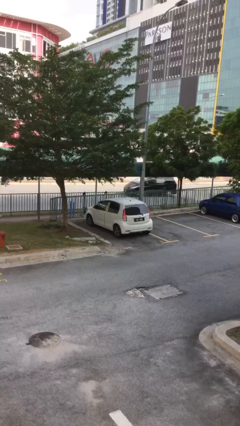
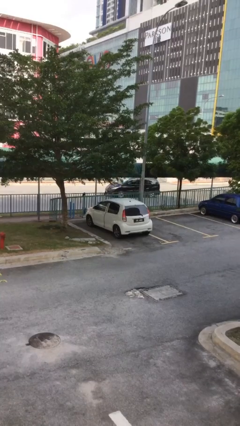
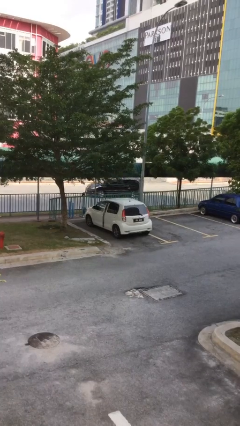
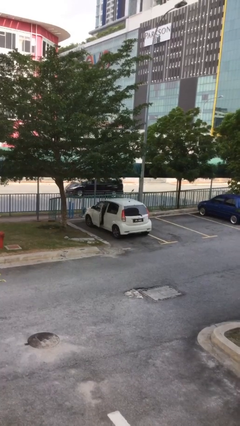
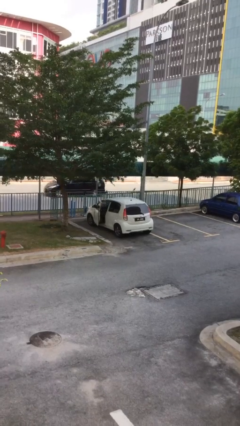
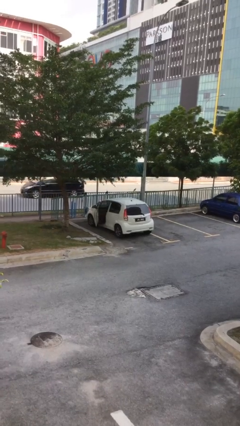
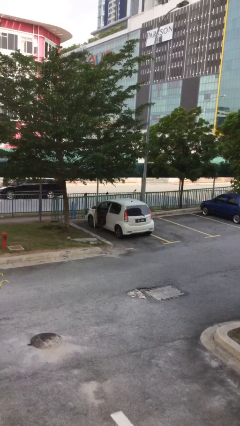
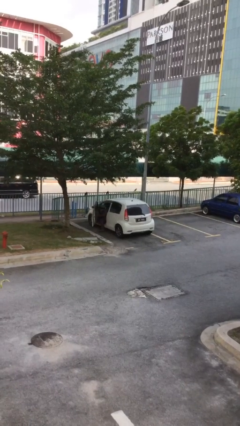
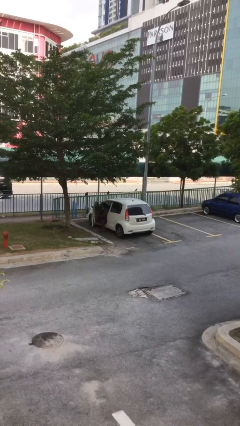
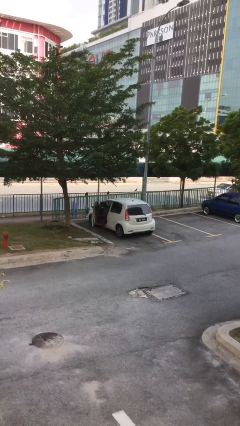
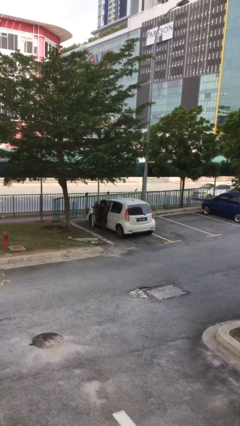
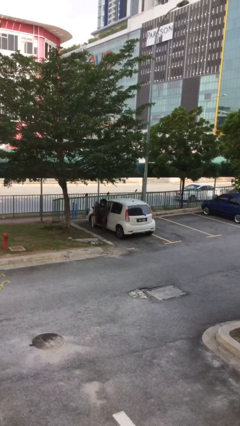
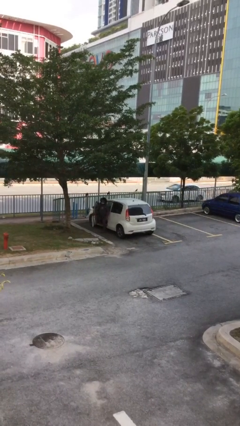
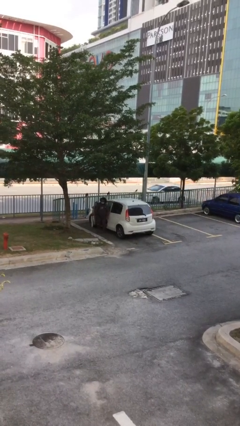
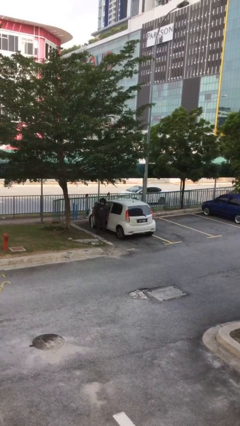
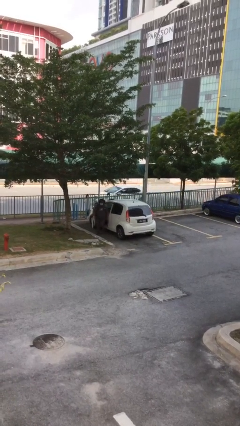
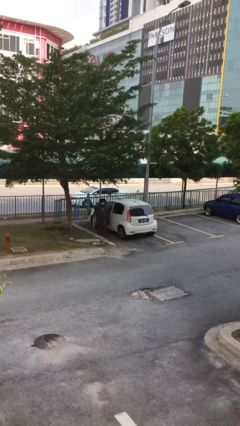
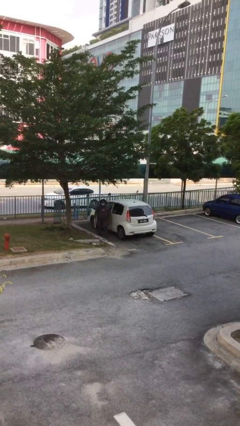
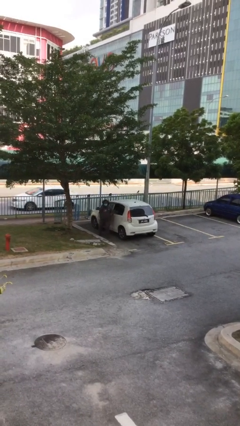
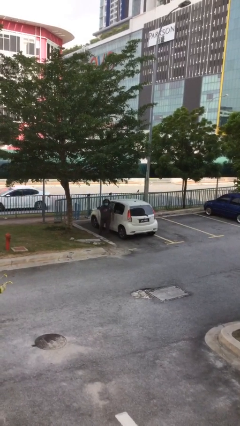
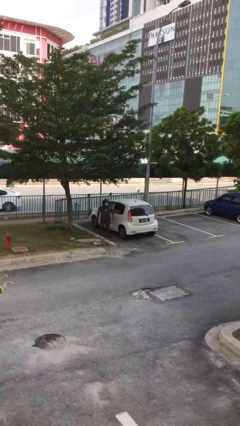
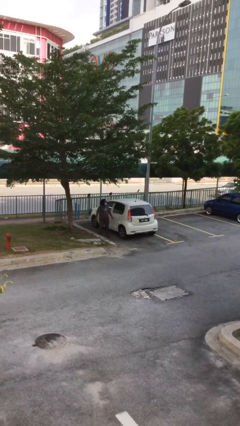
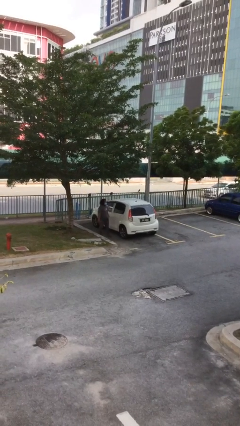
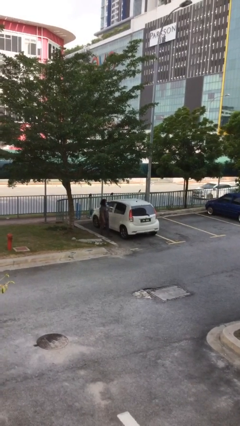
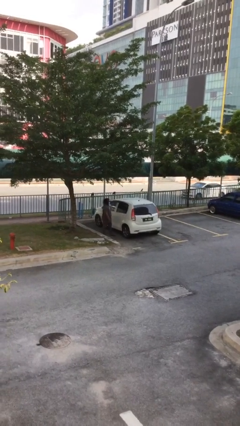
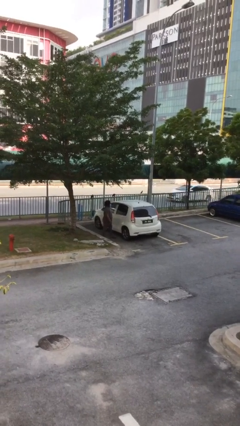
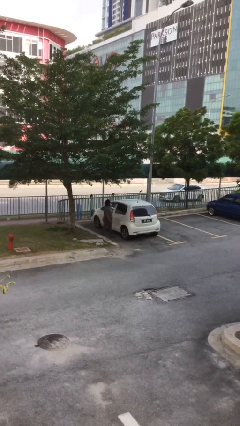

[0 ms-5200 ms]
car drops off person

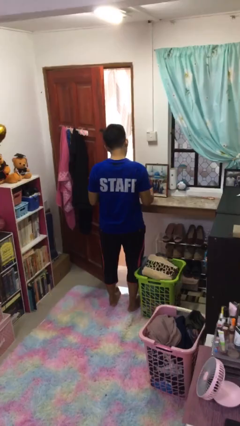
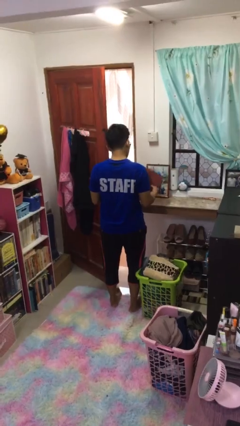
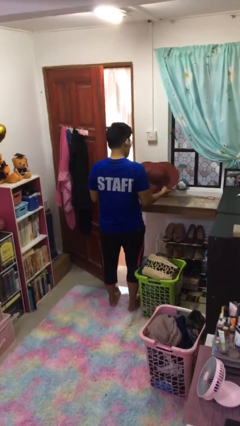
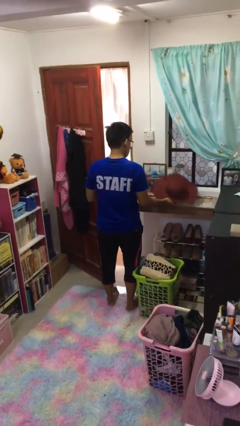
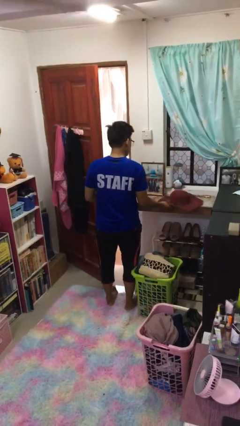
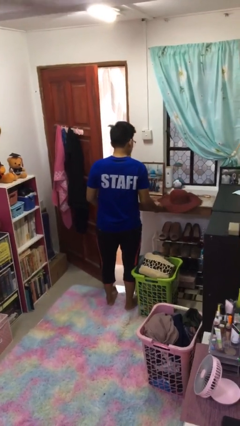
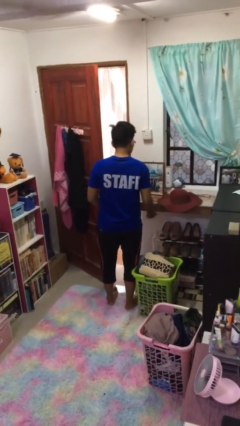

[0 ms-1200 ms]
person puts down object on countertop

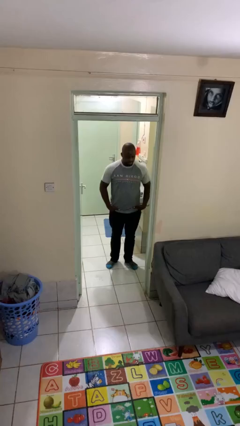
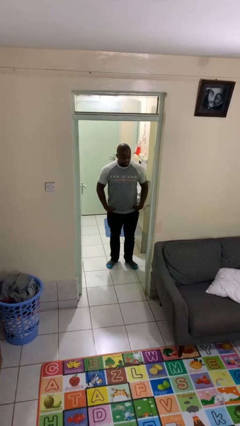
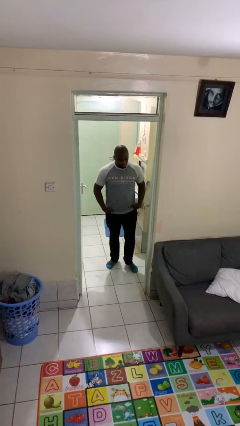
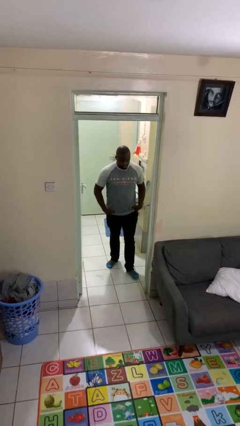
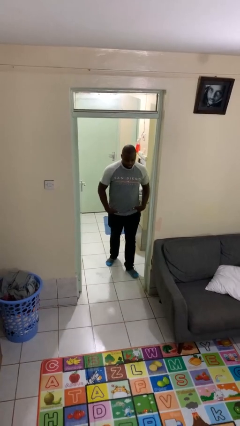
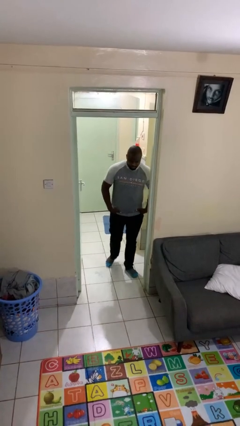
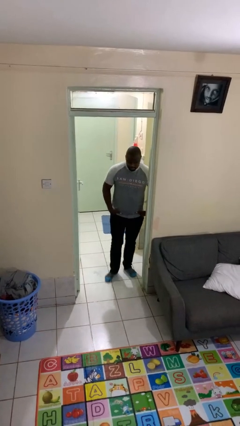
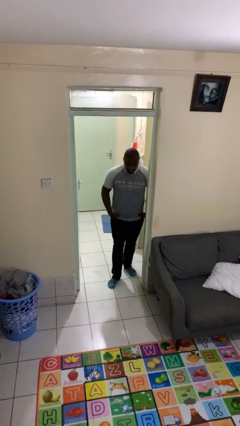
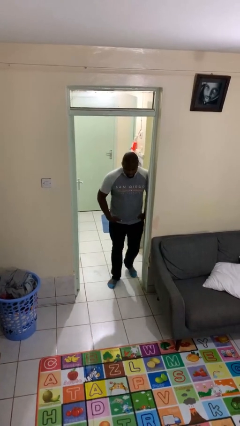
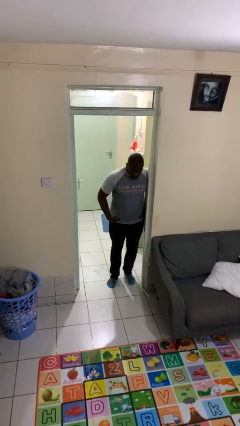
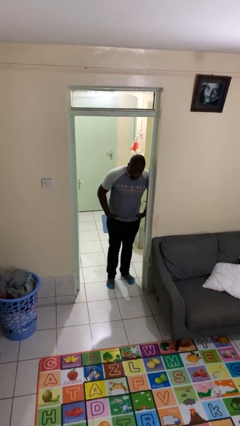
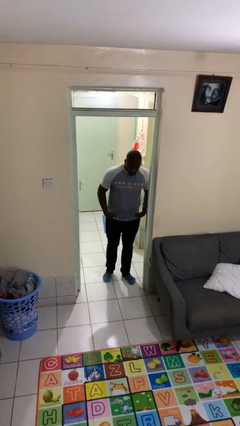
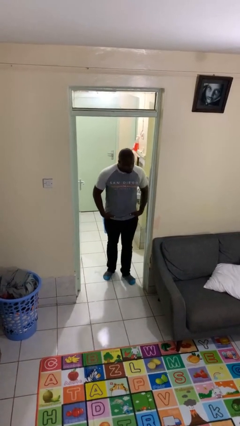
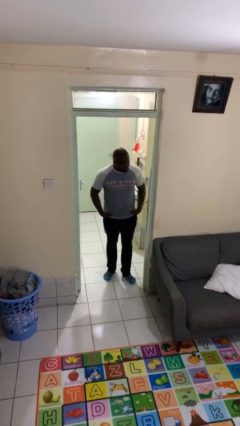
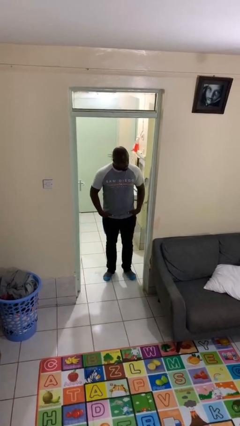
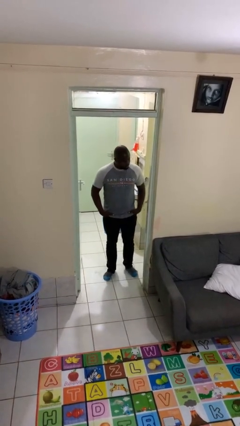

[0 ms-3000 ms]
person bumps into wall

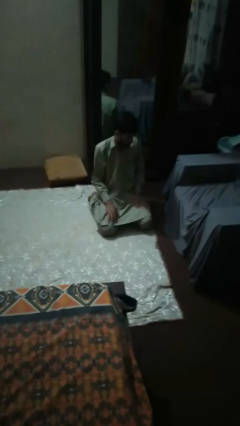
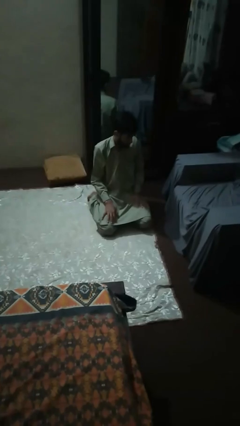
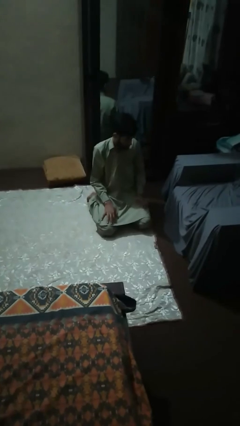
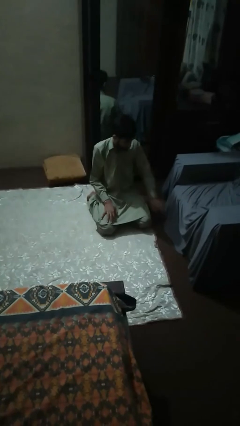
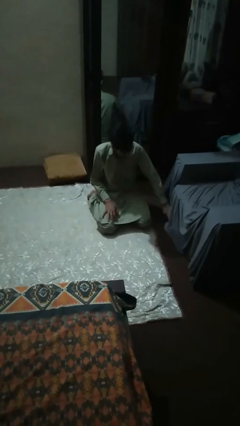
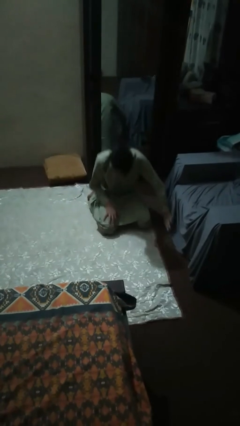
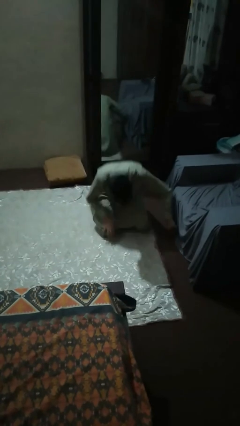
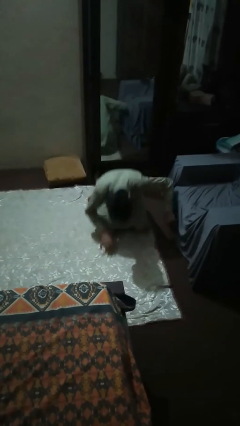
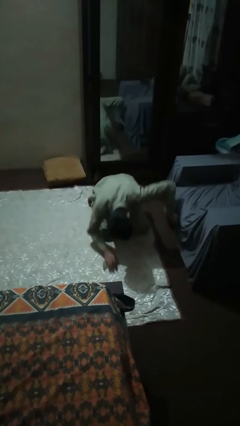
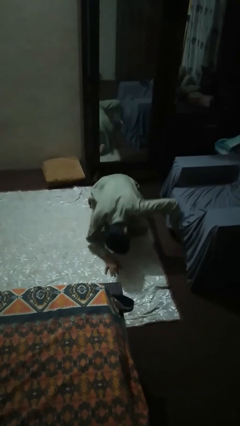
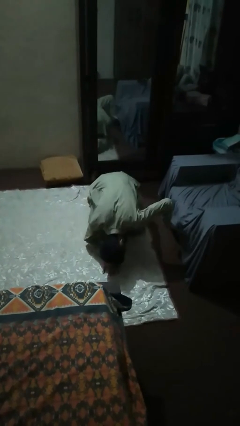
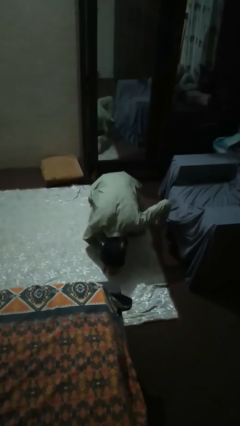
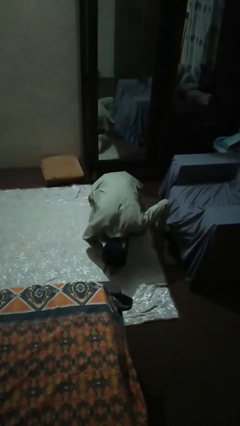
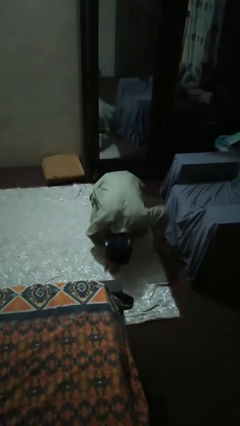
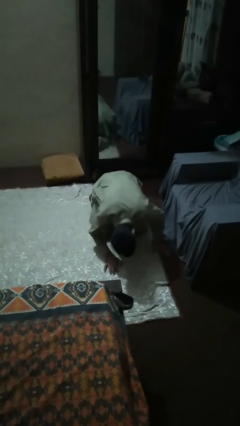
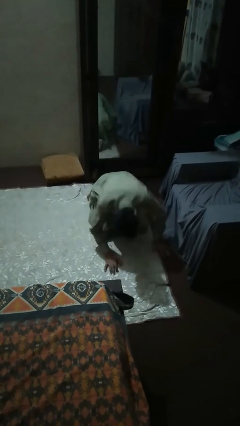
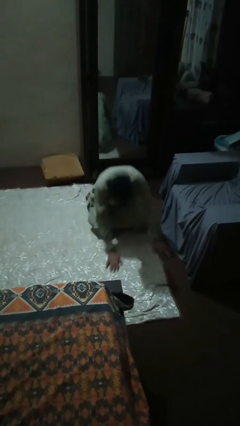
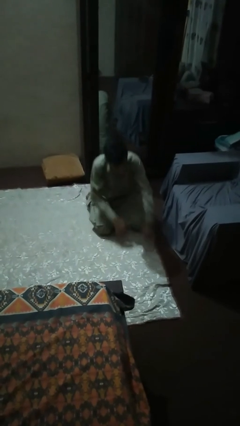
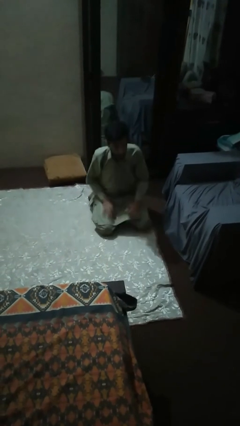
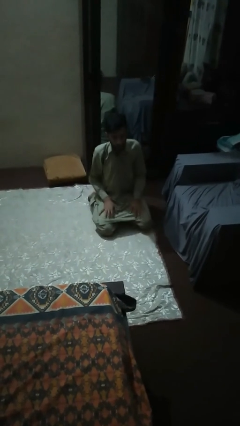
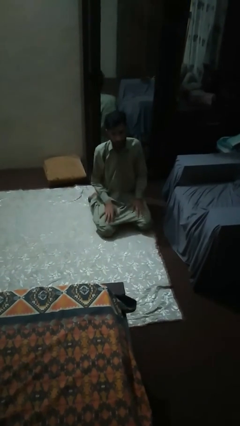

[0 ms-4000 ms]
person searches under couch

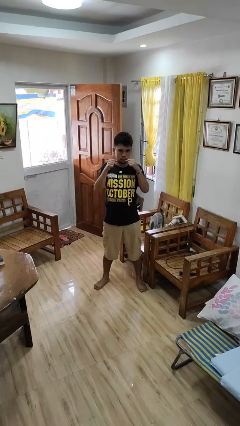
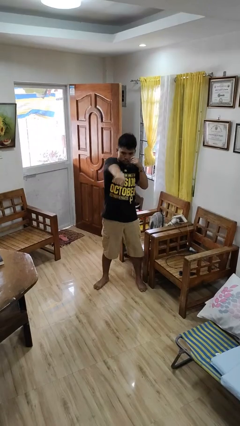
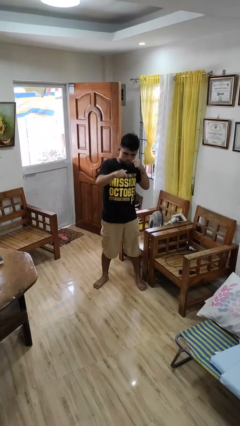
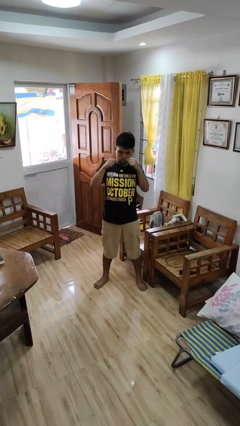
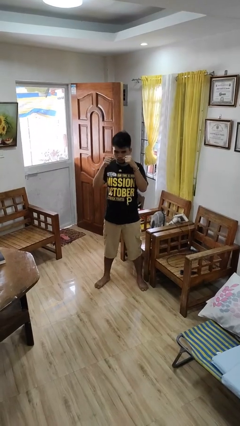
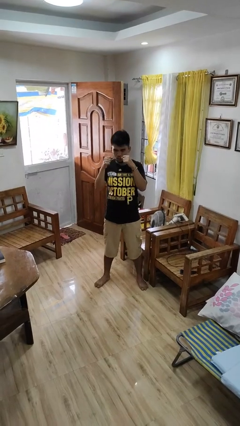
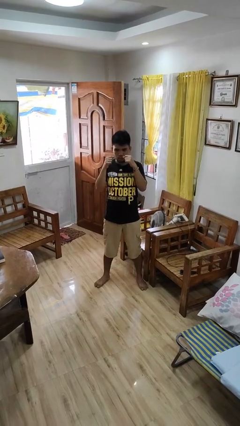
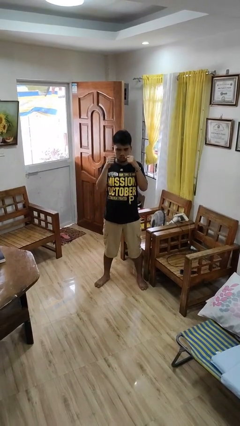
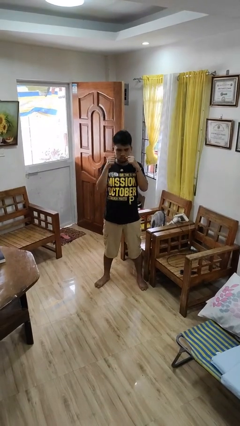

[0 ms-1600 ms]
person punches

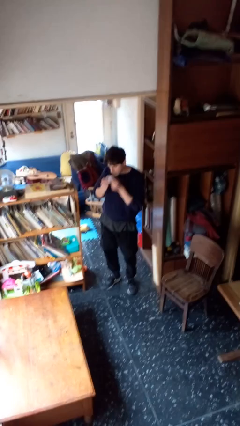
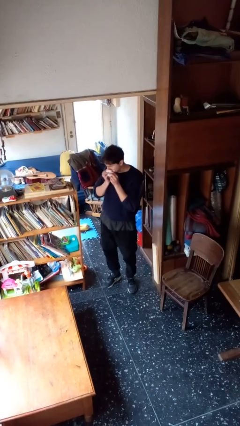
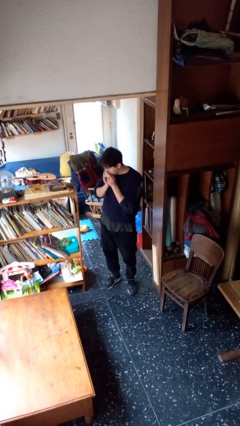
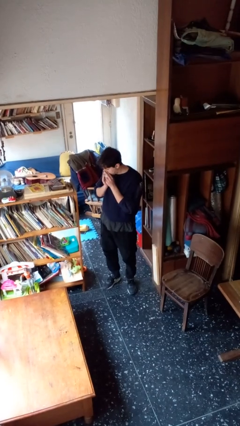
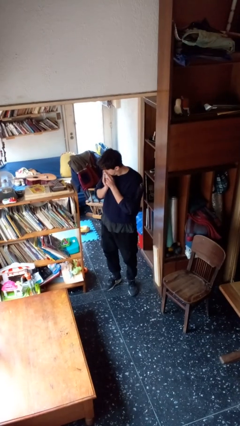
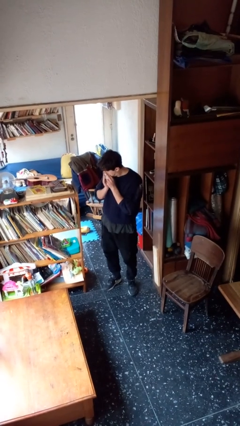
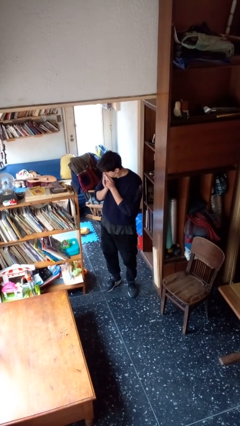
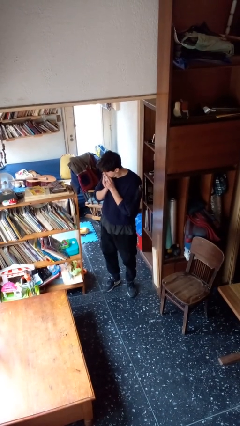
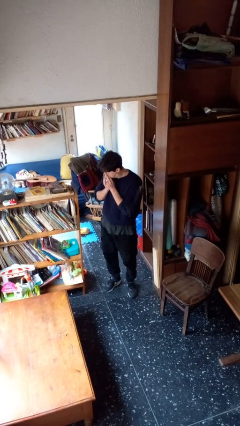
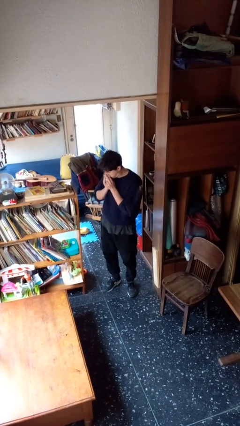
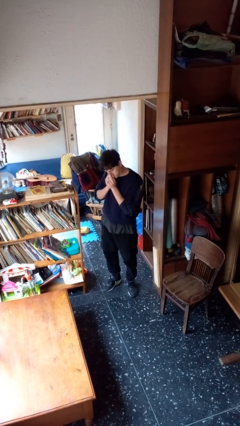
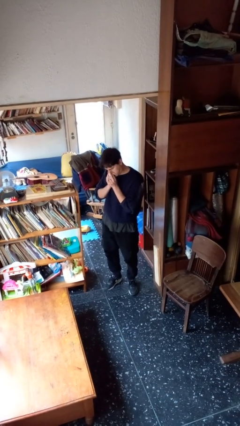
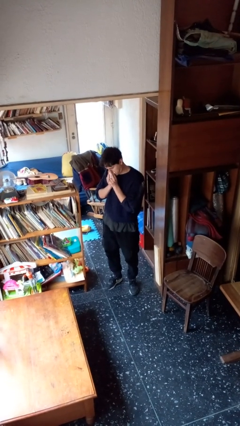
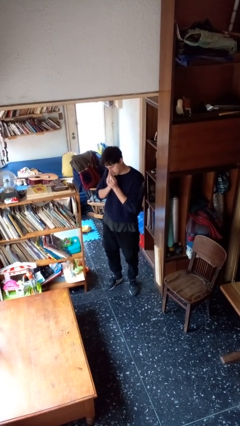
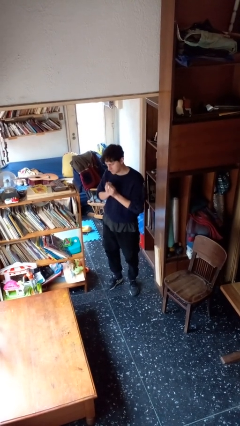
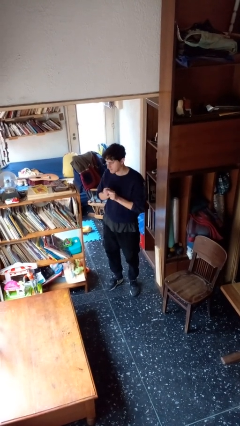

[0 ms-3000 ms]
person blows nose
